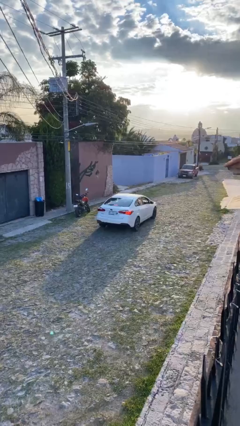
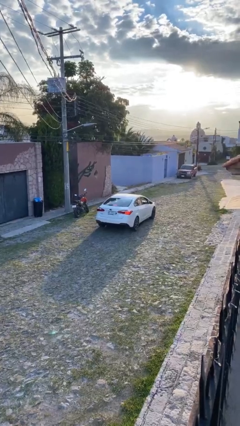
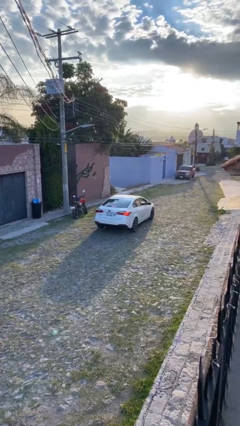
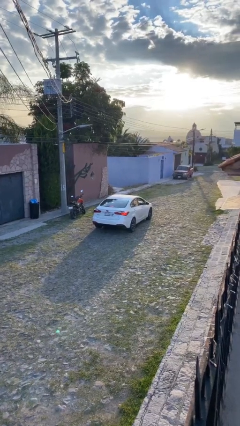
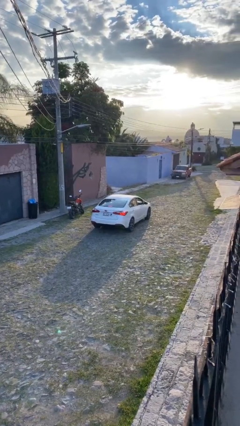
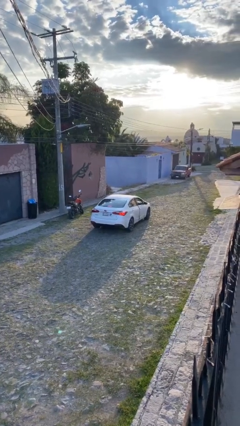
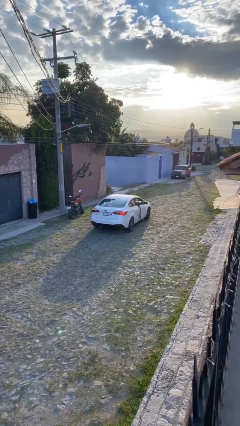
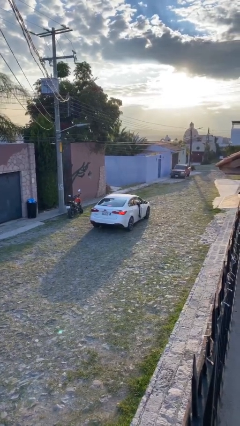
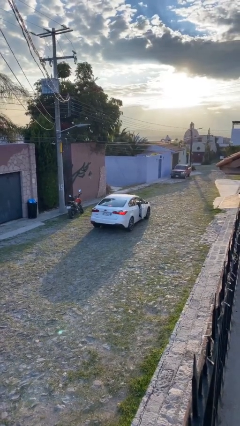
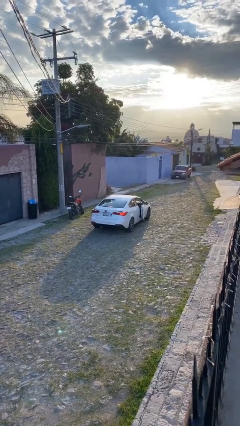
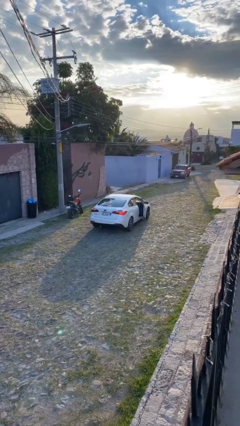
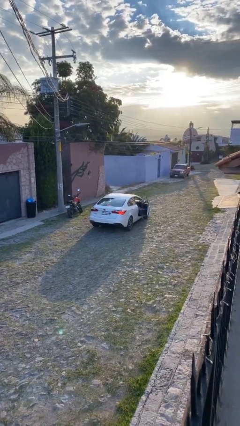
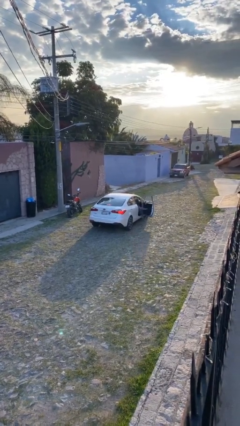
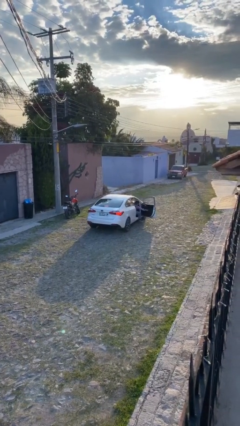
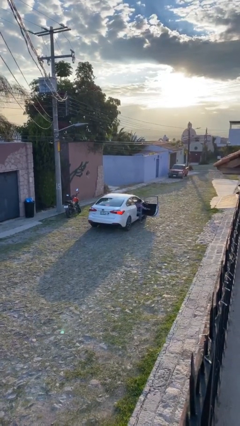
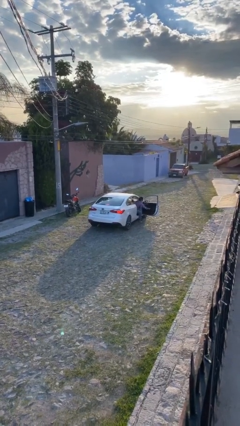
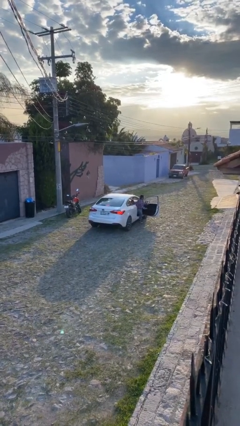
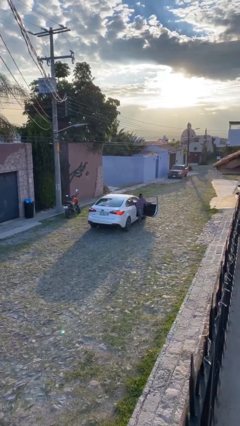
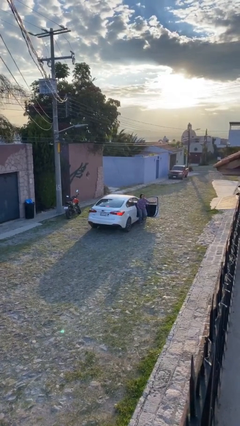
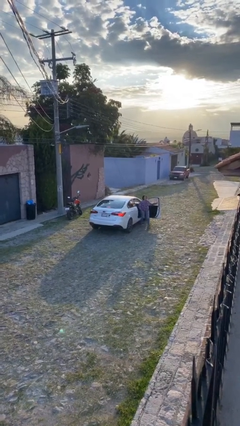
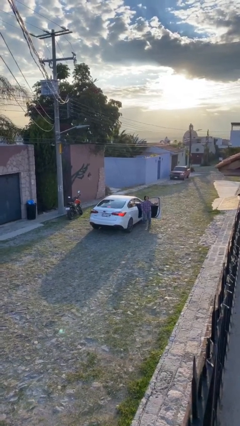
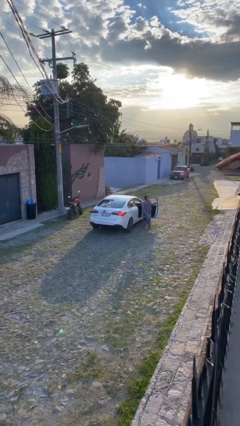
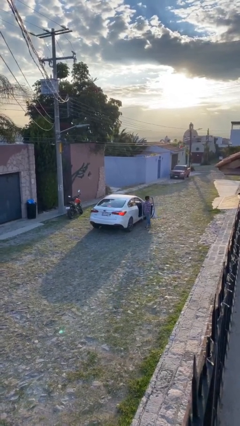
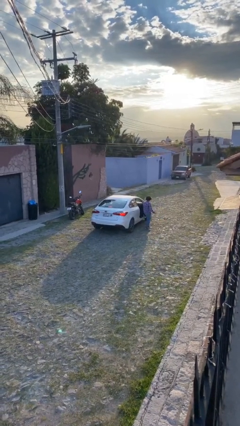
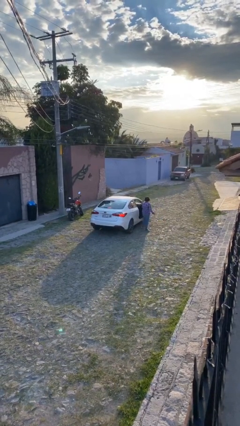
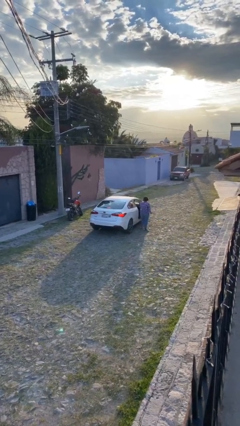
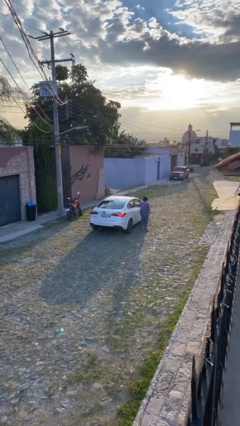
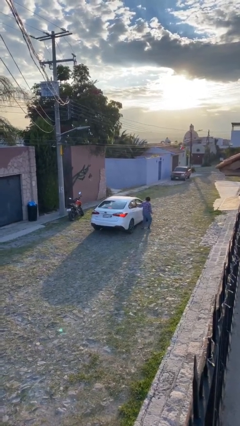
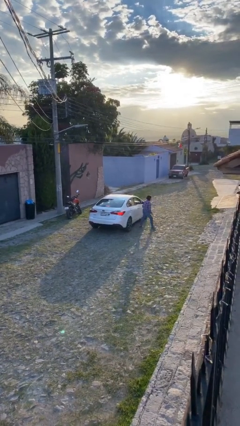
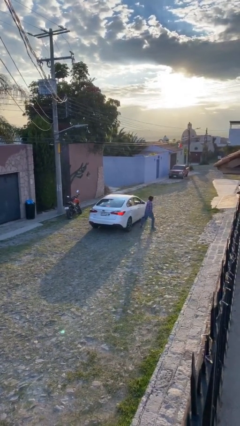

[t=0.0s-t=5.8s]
car drops off person

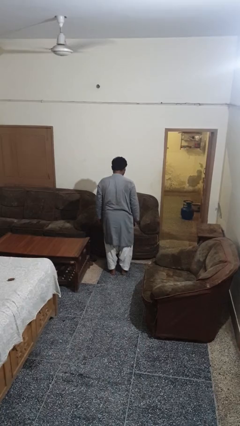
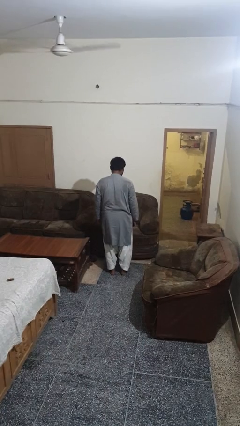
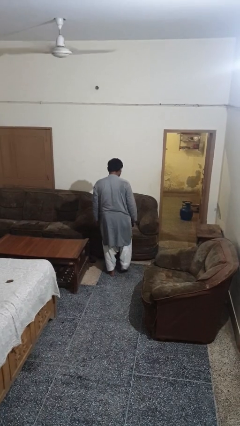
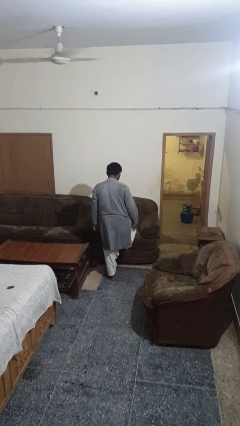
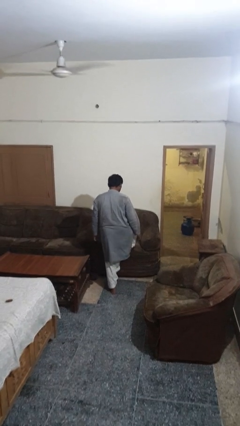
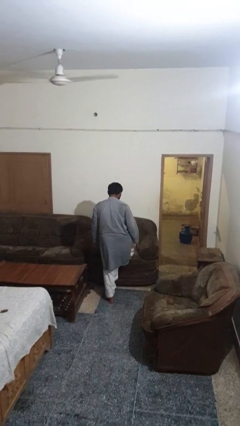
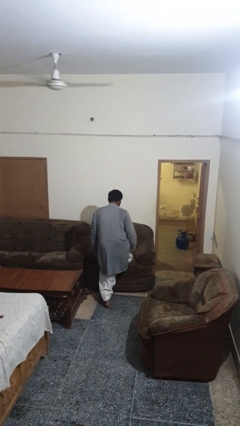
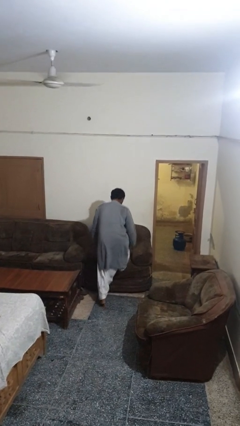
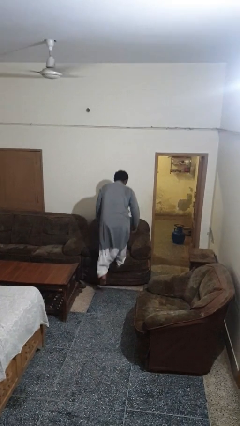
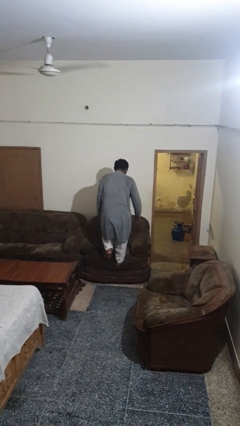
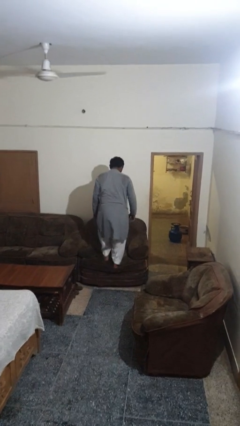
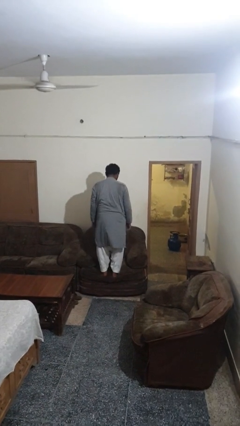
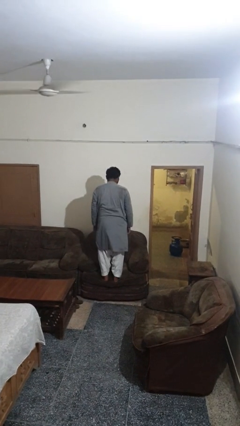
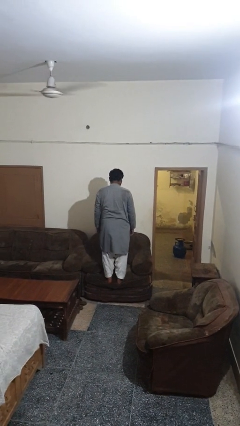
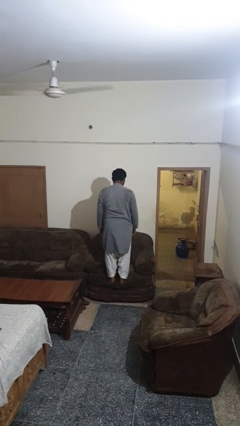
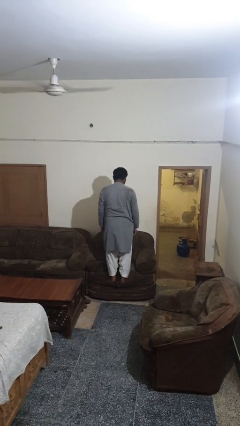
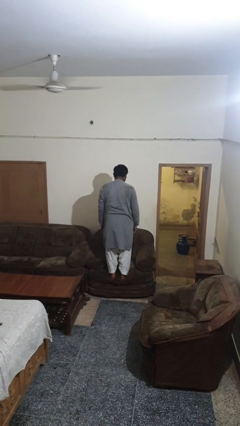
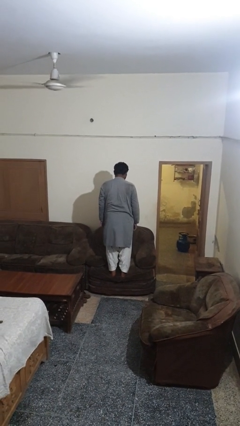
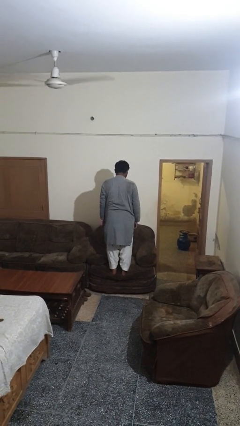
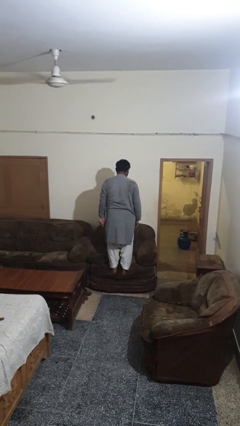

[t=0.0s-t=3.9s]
person climbs on couch

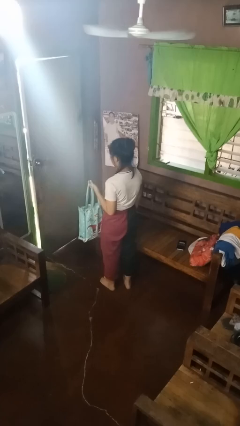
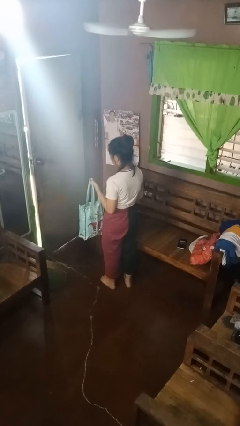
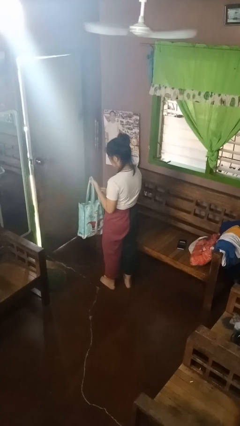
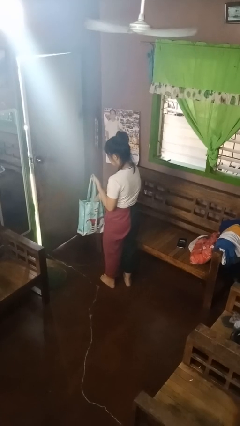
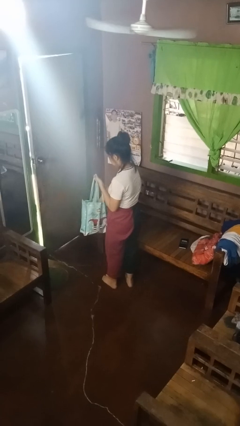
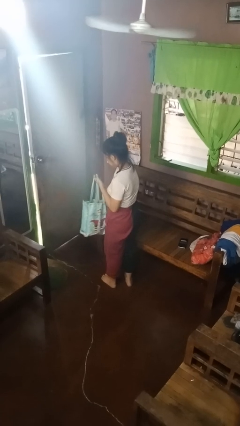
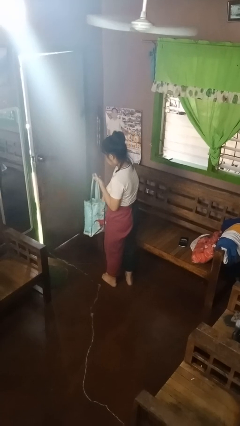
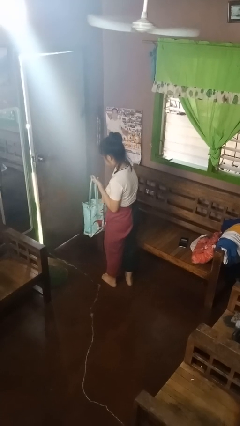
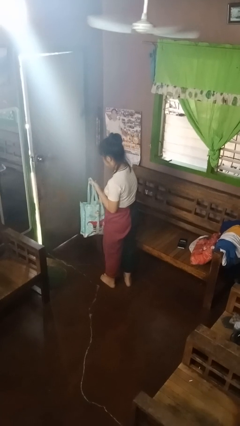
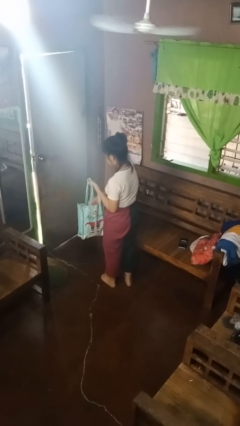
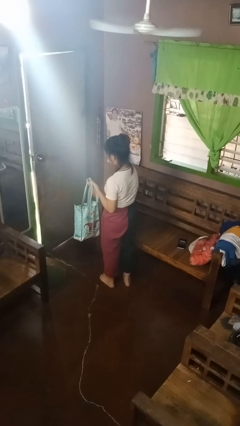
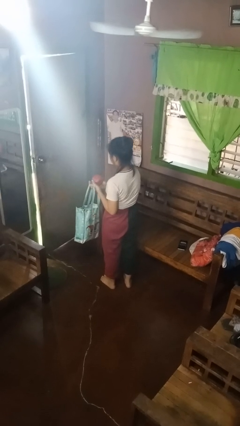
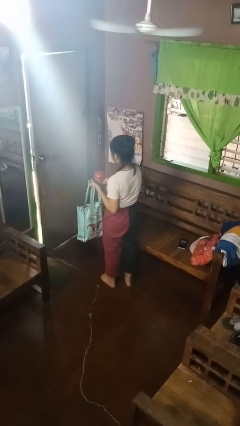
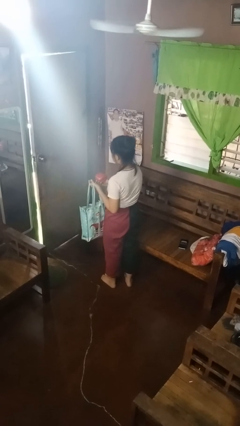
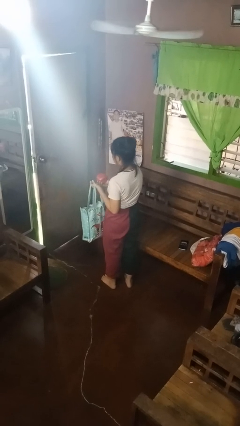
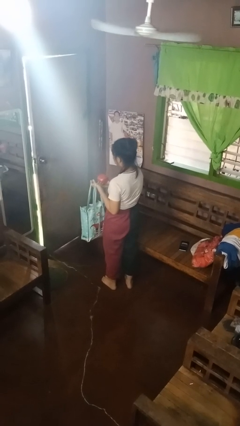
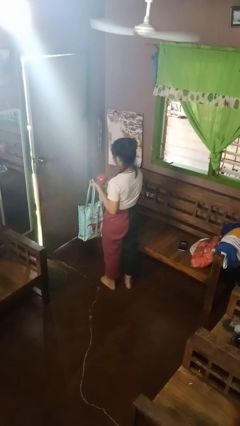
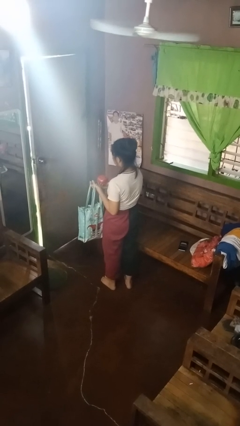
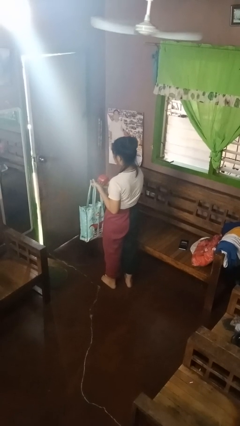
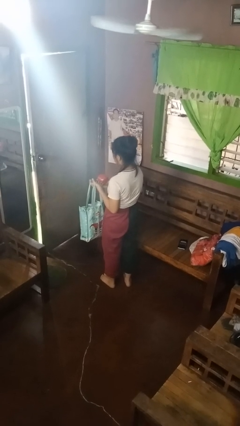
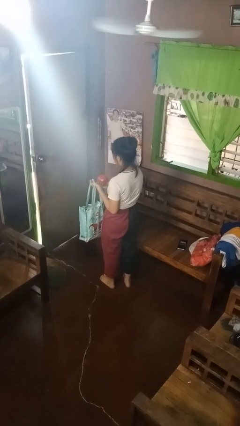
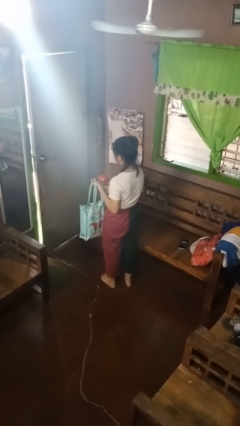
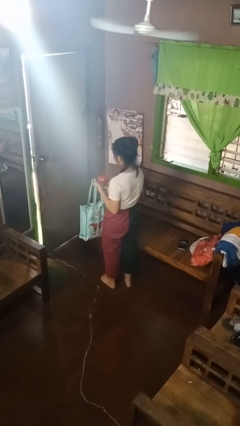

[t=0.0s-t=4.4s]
person takes object from bag

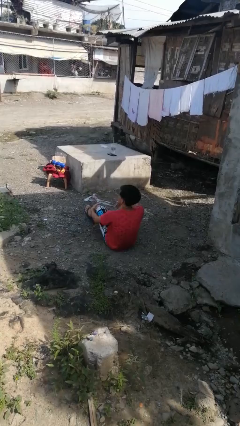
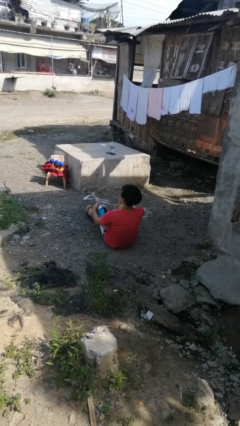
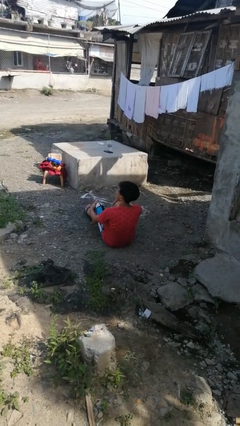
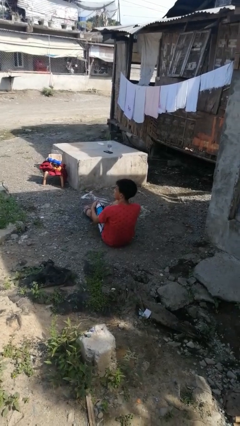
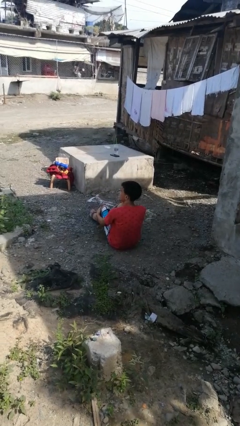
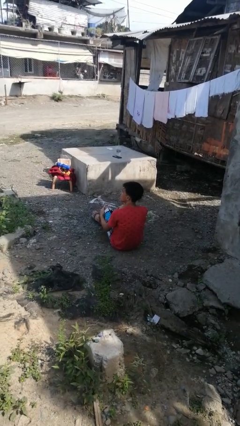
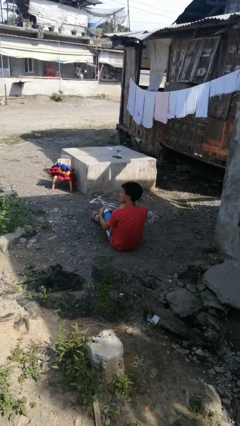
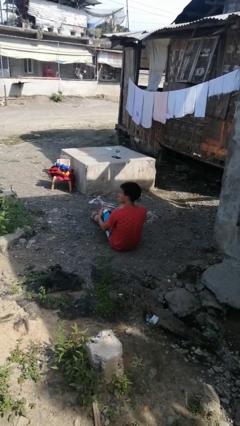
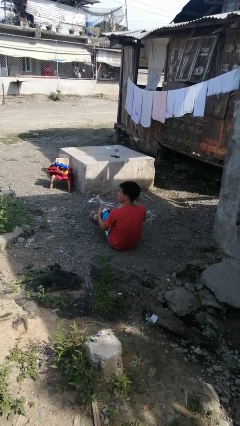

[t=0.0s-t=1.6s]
person lies down on floor

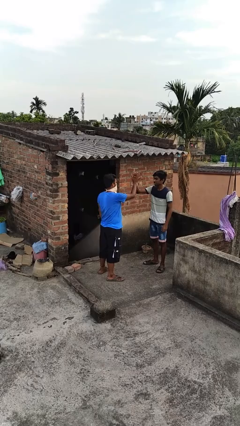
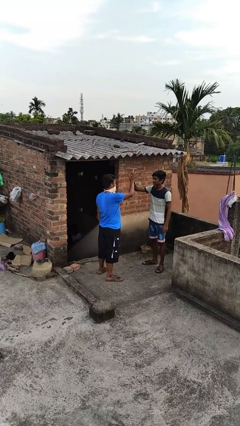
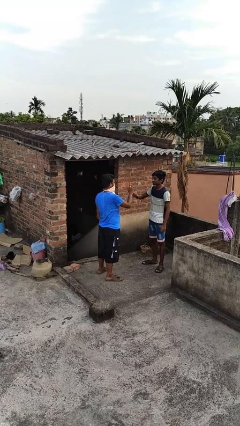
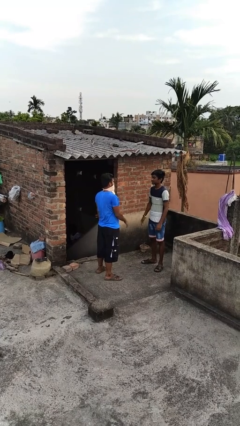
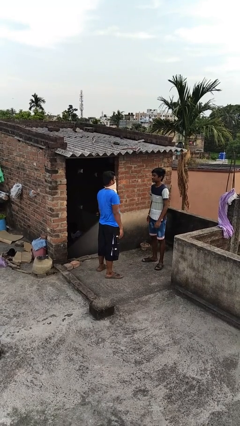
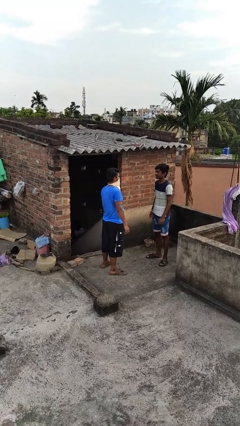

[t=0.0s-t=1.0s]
person highfives hand

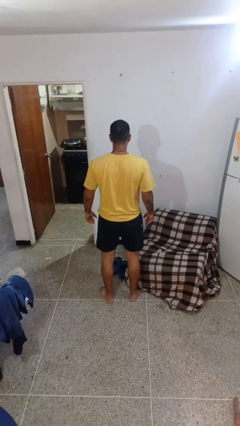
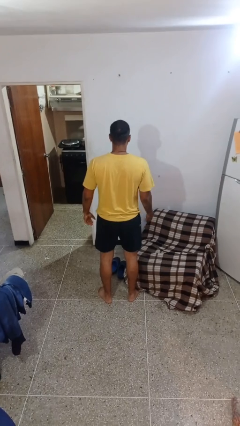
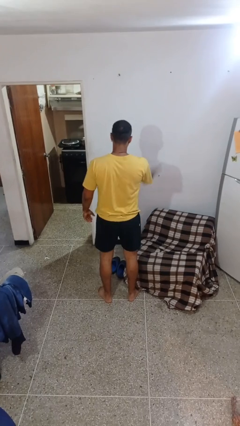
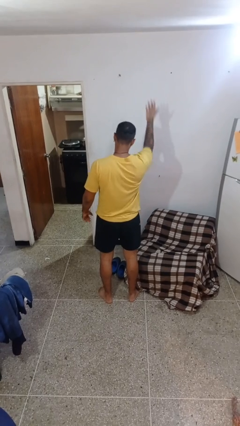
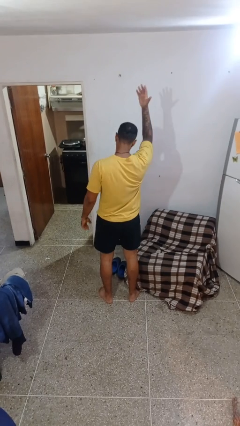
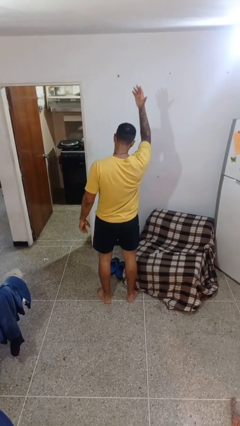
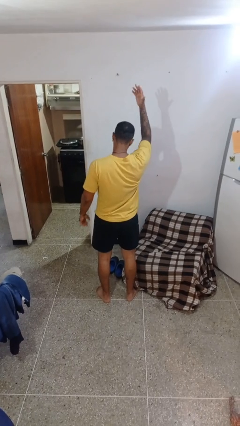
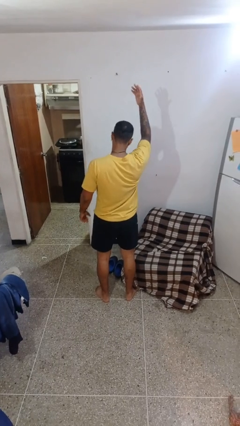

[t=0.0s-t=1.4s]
person gestures swipe up
